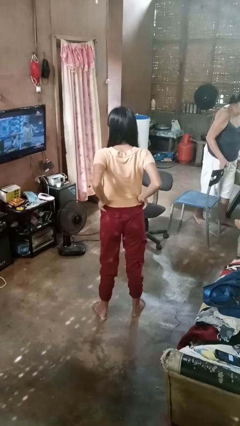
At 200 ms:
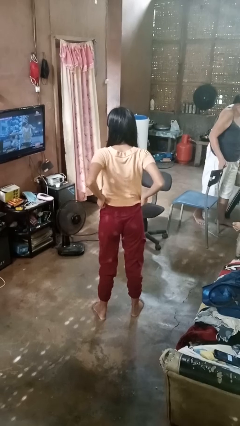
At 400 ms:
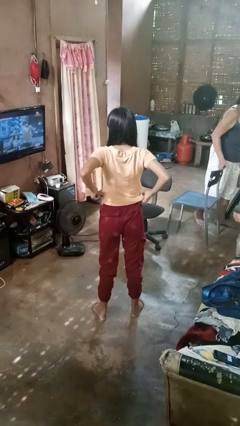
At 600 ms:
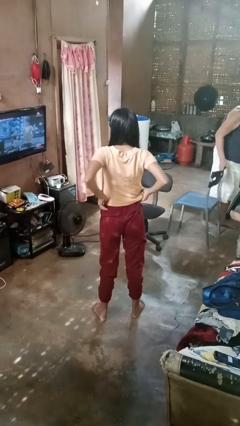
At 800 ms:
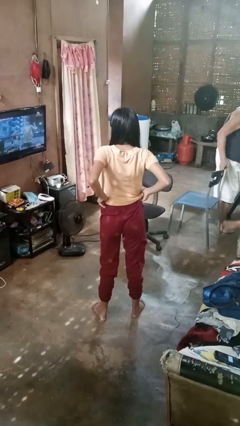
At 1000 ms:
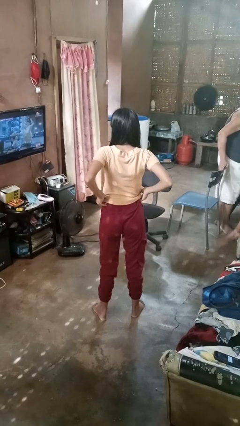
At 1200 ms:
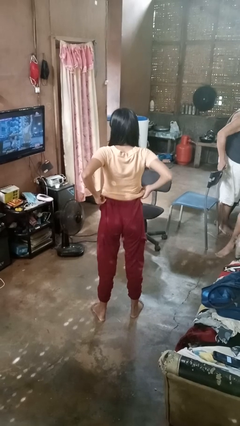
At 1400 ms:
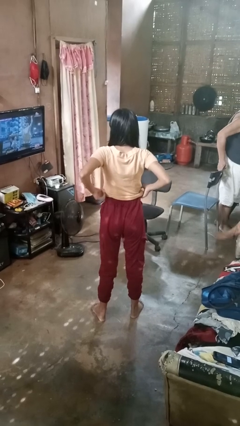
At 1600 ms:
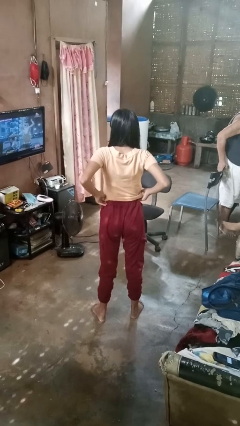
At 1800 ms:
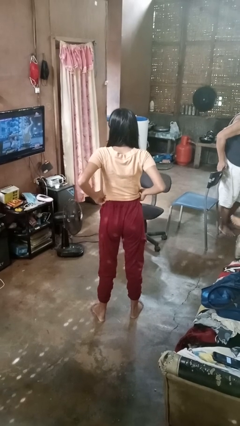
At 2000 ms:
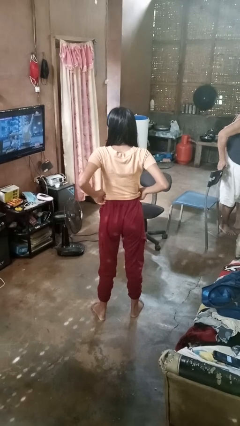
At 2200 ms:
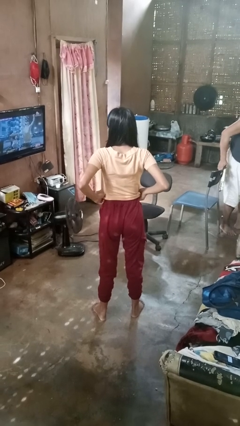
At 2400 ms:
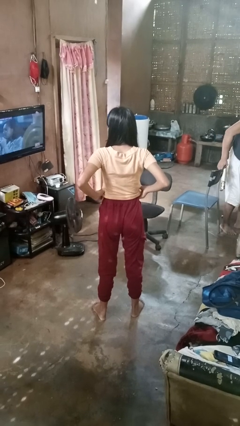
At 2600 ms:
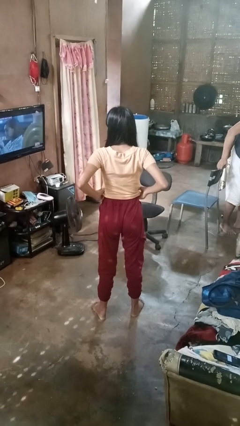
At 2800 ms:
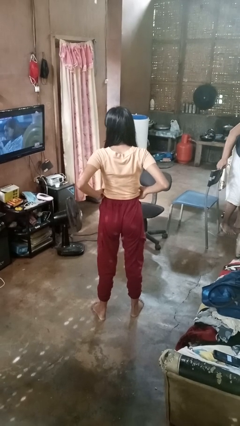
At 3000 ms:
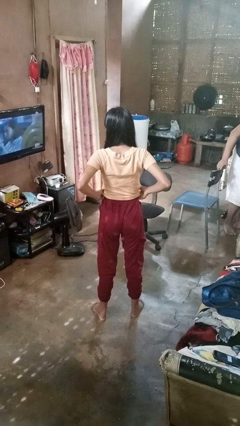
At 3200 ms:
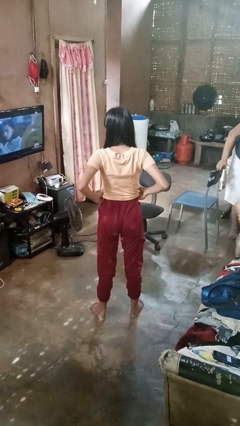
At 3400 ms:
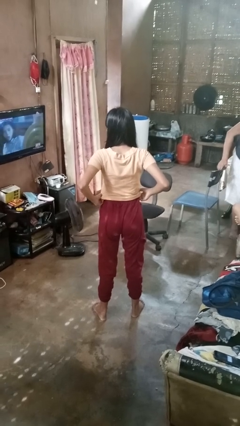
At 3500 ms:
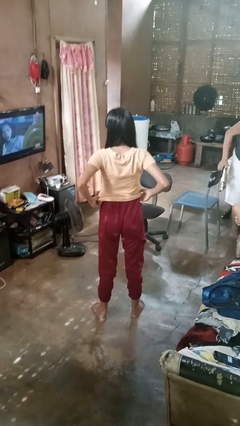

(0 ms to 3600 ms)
person hikes up pants

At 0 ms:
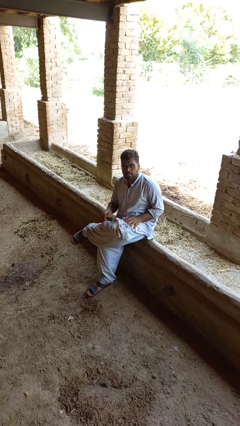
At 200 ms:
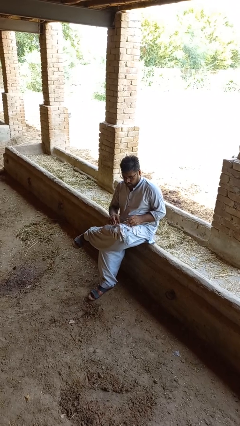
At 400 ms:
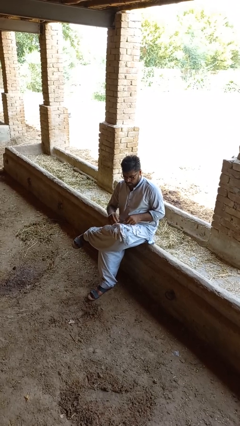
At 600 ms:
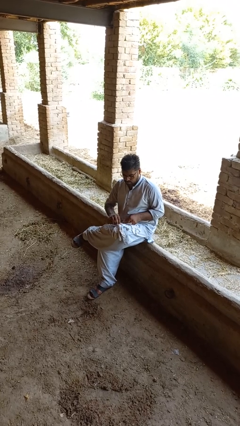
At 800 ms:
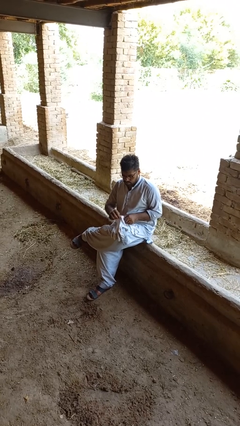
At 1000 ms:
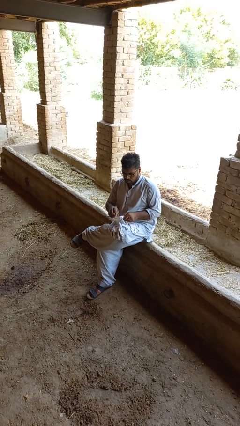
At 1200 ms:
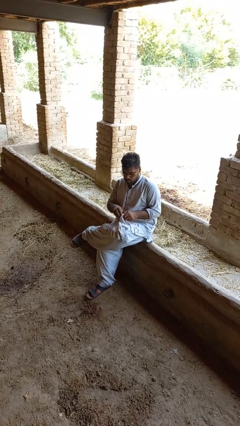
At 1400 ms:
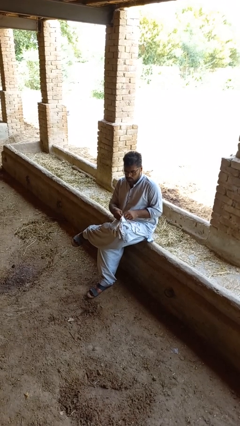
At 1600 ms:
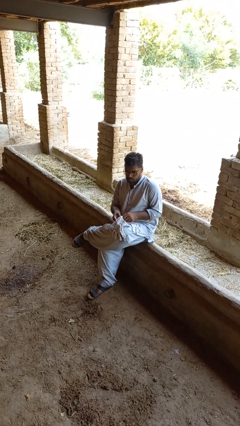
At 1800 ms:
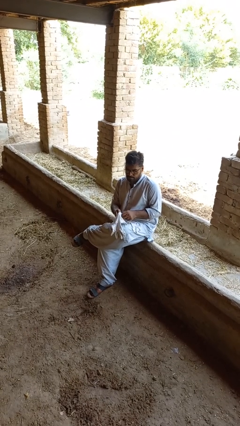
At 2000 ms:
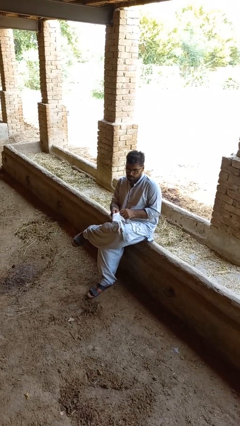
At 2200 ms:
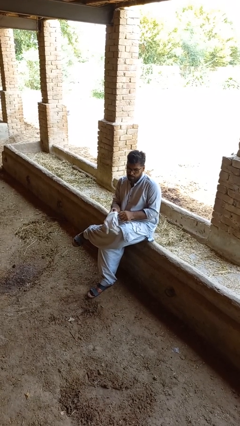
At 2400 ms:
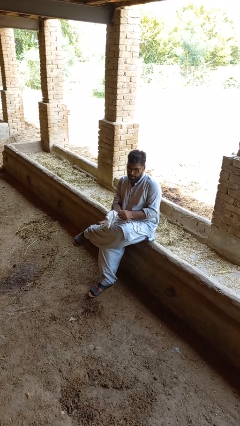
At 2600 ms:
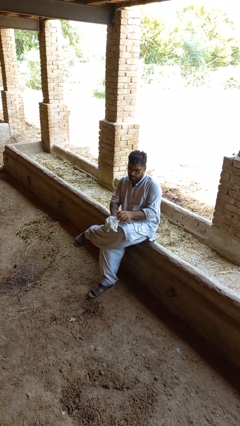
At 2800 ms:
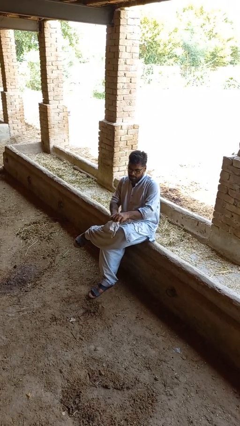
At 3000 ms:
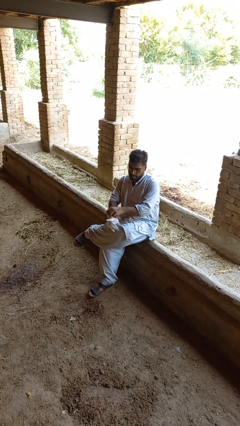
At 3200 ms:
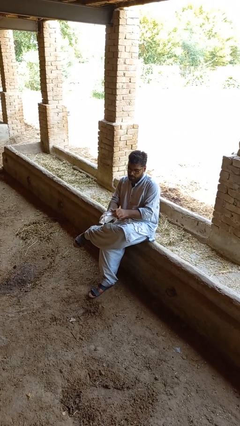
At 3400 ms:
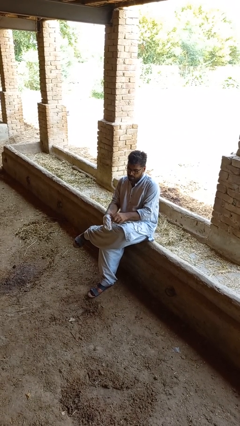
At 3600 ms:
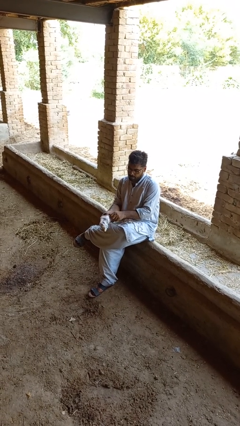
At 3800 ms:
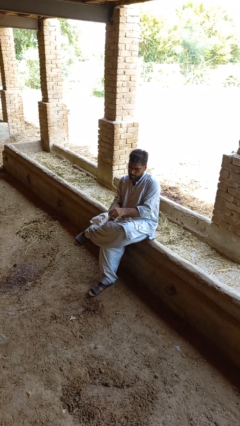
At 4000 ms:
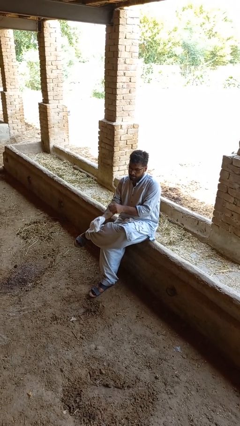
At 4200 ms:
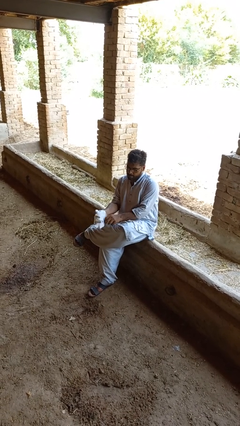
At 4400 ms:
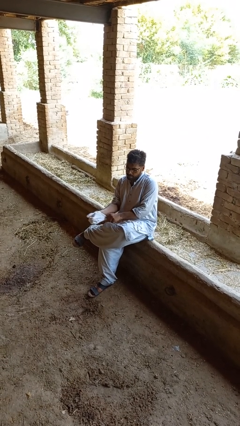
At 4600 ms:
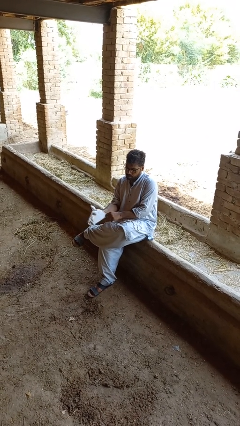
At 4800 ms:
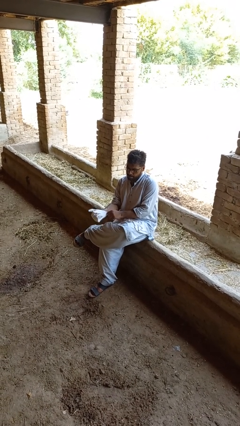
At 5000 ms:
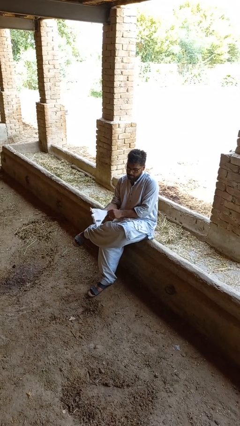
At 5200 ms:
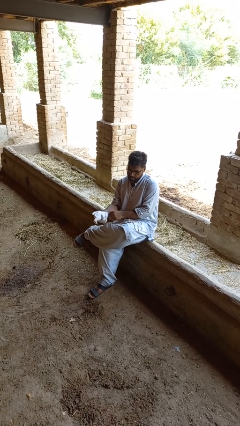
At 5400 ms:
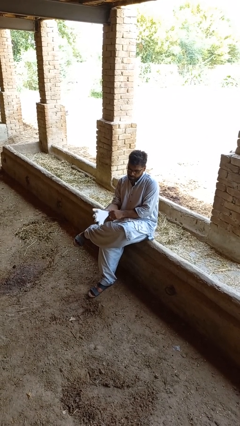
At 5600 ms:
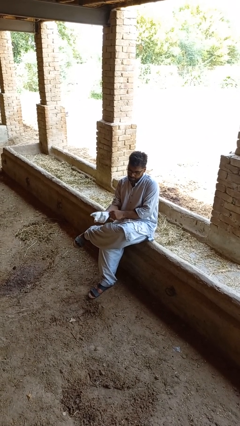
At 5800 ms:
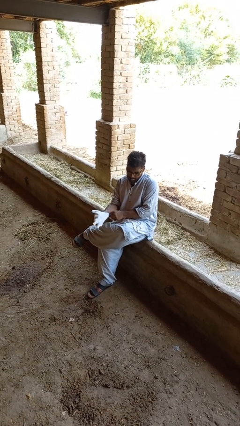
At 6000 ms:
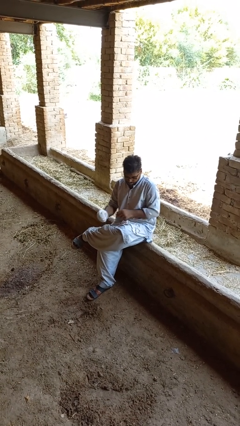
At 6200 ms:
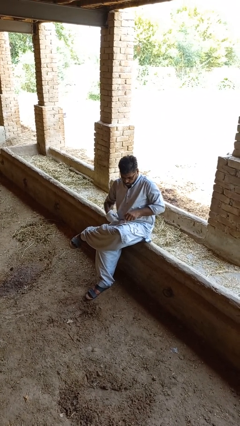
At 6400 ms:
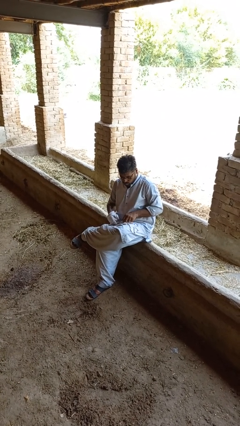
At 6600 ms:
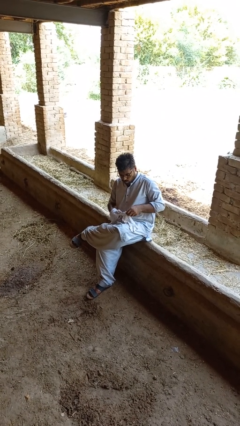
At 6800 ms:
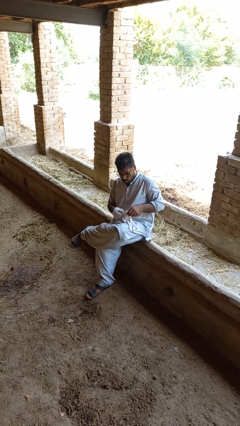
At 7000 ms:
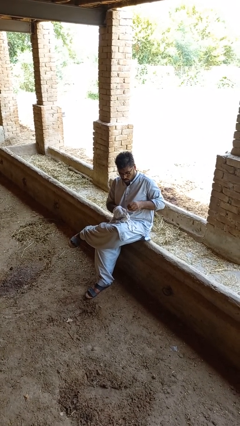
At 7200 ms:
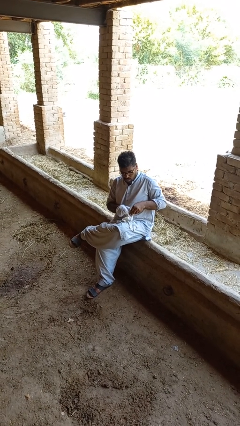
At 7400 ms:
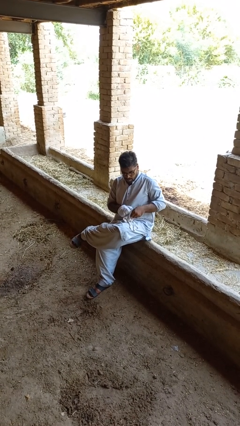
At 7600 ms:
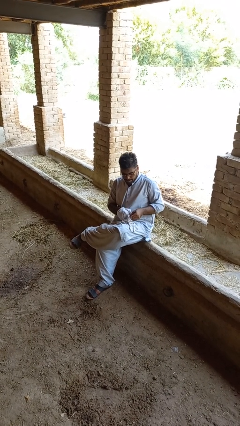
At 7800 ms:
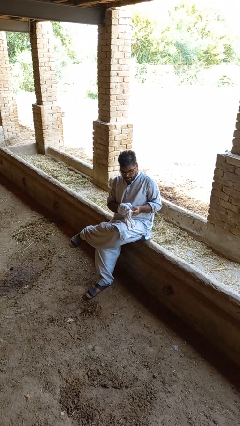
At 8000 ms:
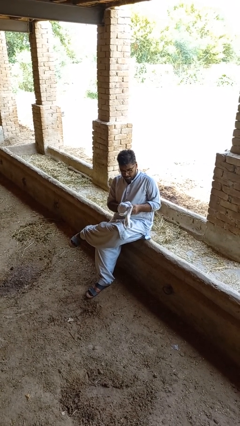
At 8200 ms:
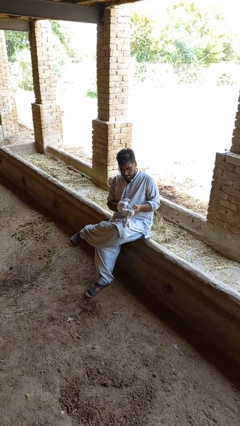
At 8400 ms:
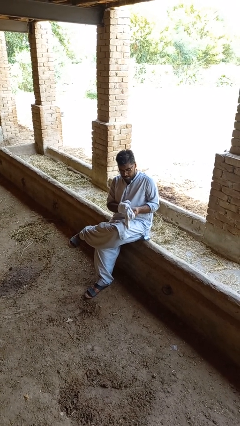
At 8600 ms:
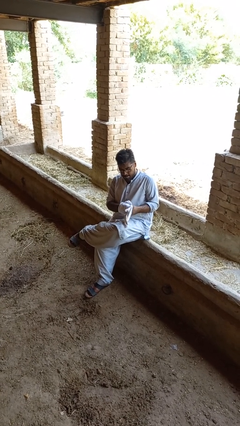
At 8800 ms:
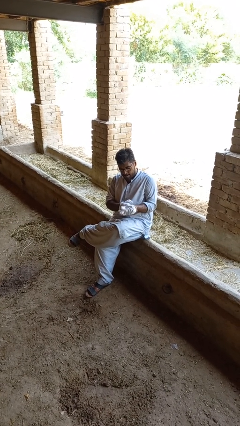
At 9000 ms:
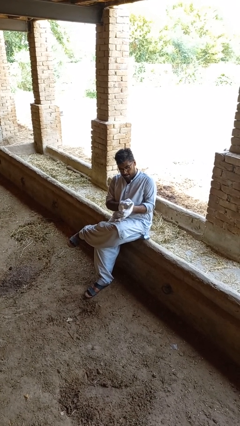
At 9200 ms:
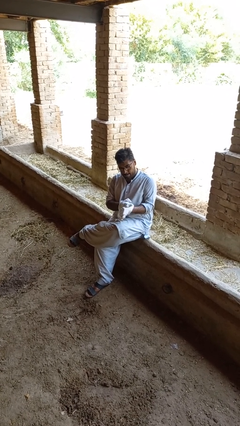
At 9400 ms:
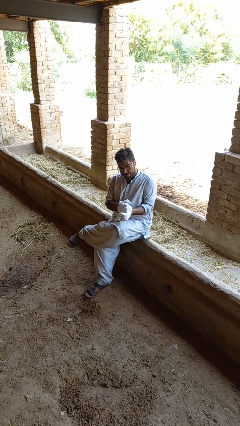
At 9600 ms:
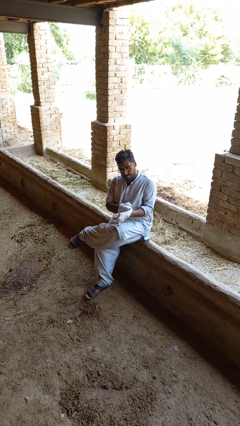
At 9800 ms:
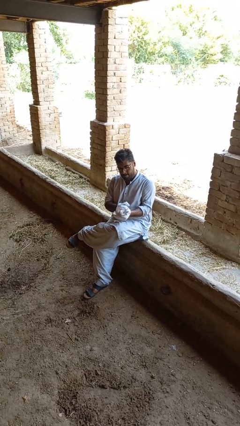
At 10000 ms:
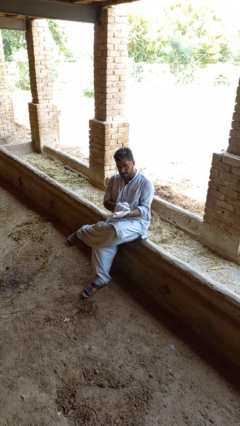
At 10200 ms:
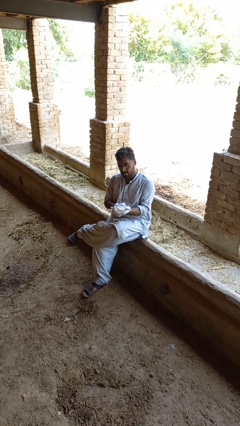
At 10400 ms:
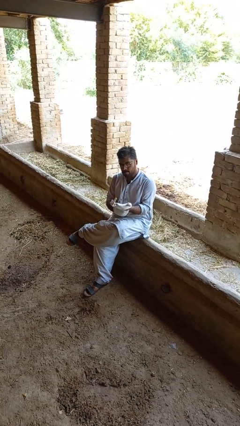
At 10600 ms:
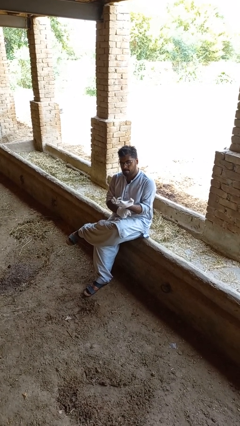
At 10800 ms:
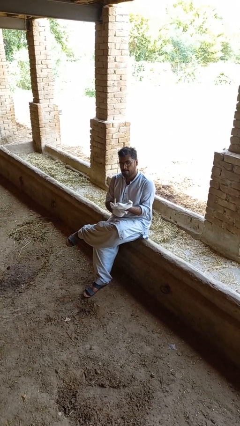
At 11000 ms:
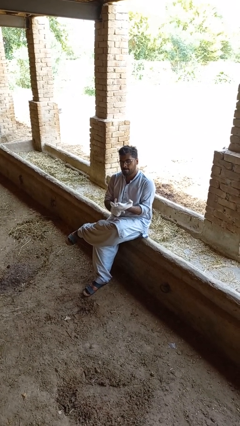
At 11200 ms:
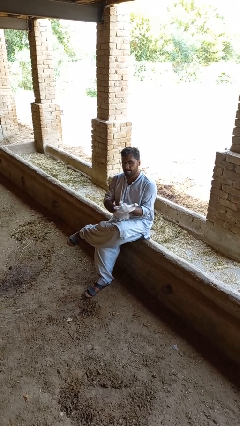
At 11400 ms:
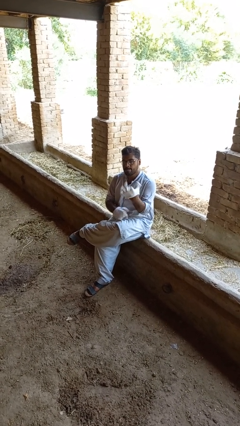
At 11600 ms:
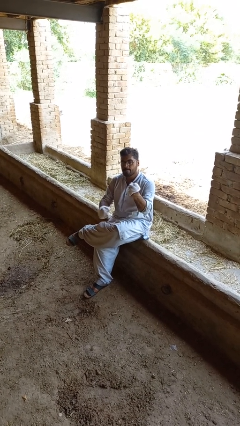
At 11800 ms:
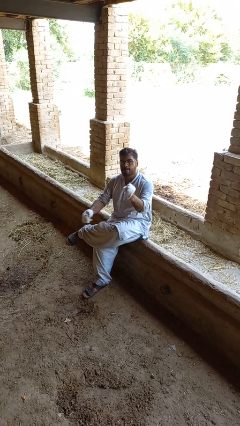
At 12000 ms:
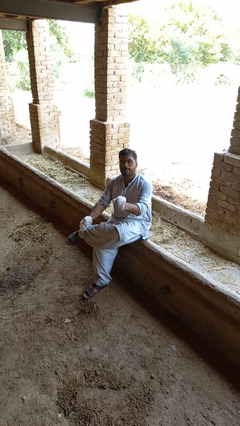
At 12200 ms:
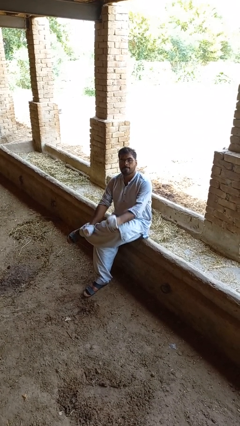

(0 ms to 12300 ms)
person puts on gloves

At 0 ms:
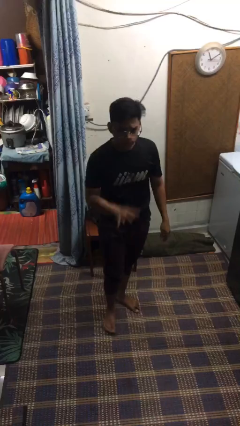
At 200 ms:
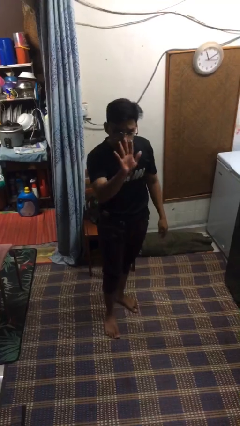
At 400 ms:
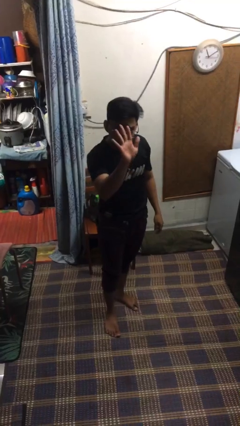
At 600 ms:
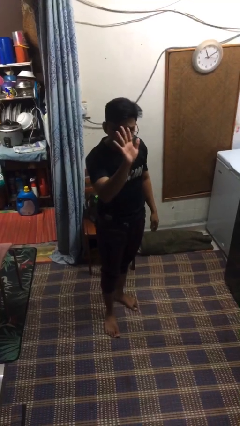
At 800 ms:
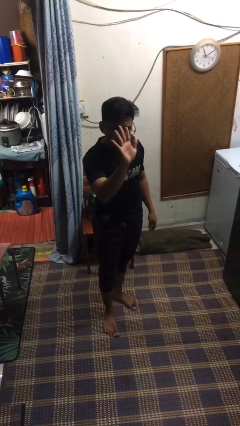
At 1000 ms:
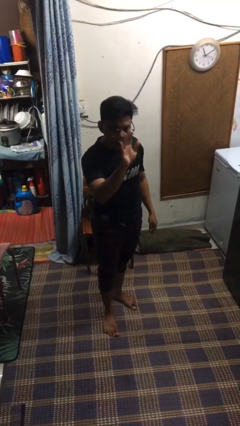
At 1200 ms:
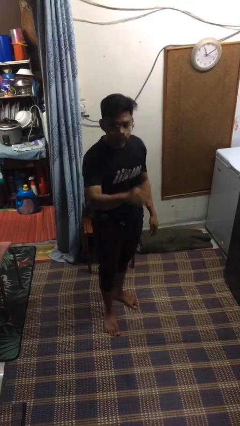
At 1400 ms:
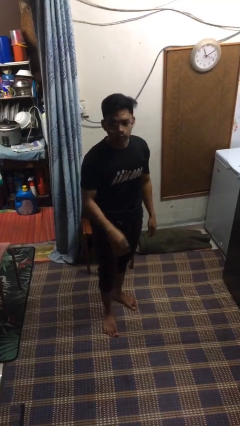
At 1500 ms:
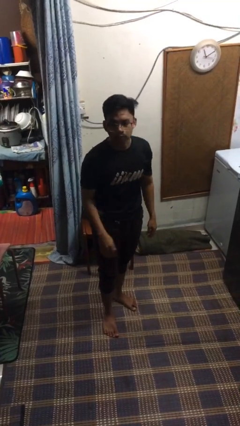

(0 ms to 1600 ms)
person gestures stop

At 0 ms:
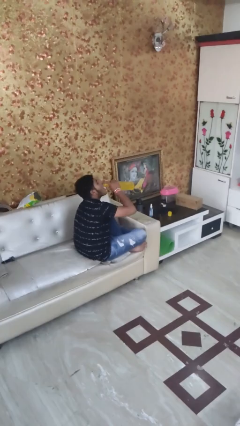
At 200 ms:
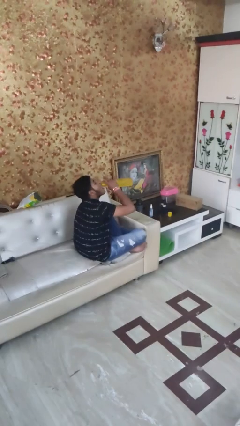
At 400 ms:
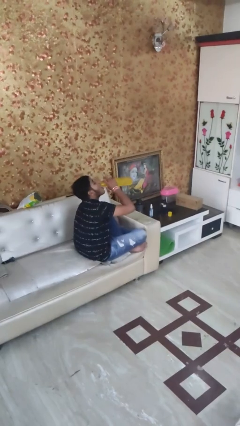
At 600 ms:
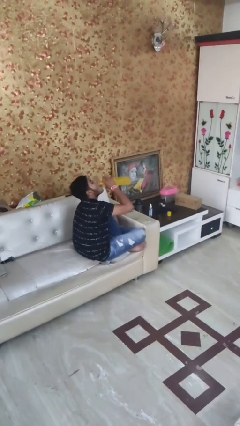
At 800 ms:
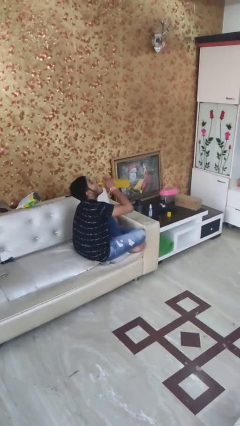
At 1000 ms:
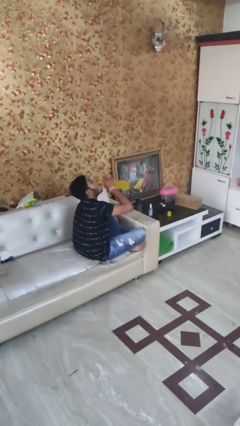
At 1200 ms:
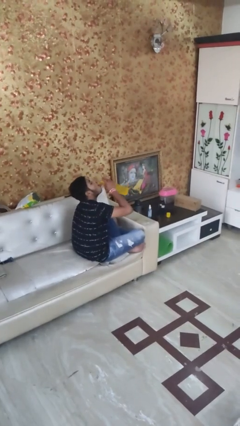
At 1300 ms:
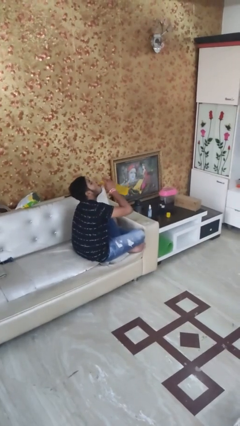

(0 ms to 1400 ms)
person drinks from bottle
